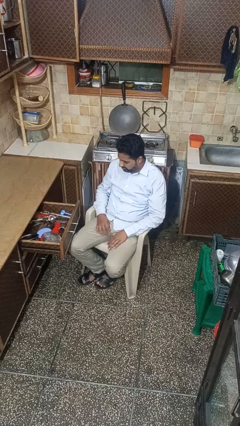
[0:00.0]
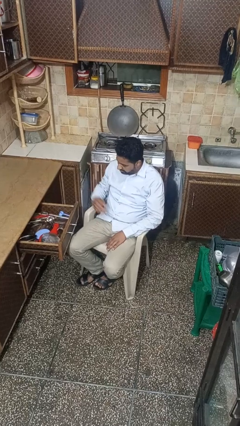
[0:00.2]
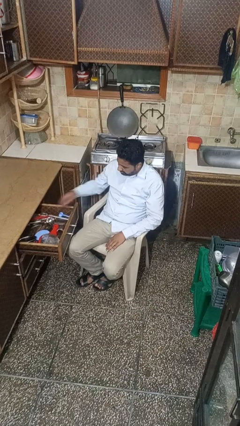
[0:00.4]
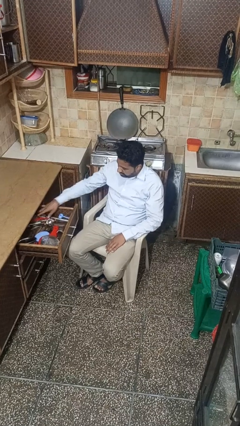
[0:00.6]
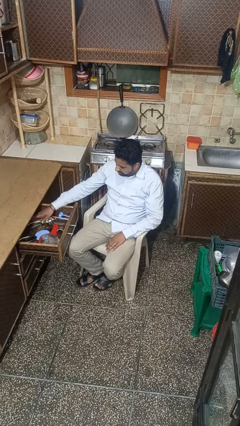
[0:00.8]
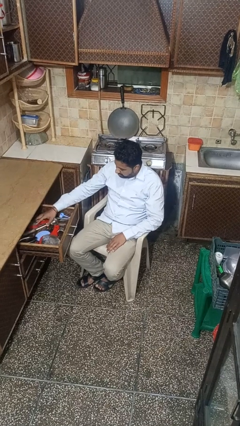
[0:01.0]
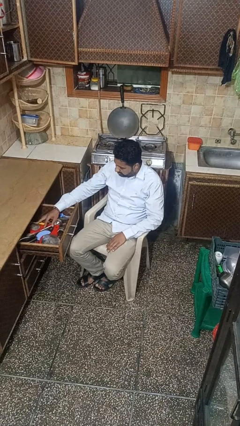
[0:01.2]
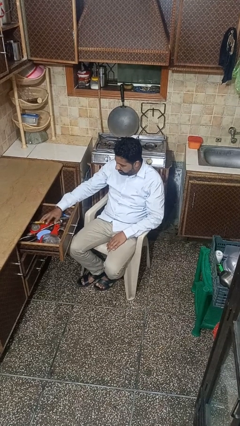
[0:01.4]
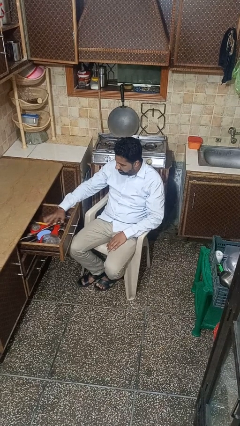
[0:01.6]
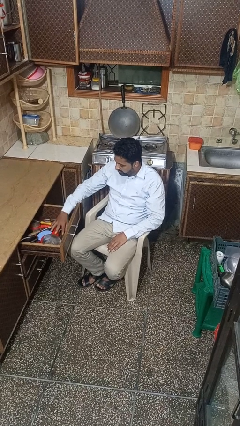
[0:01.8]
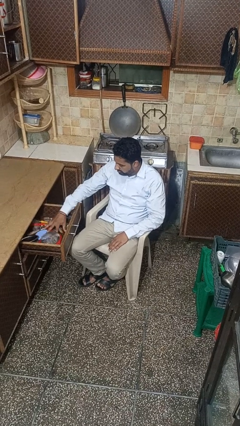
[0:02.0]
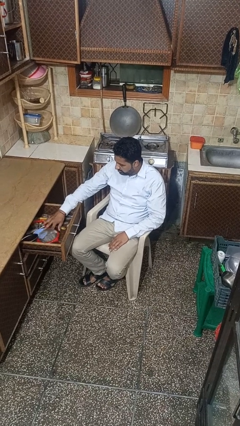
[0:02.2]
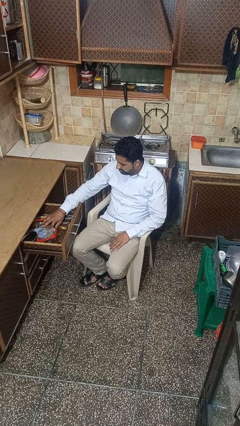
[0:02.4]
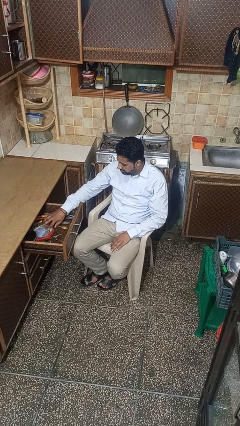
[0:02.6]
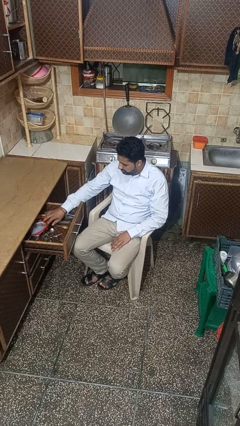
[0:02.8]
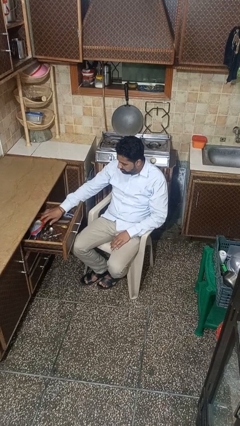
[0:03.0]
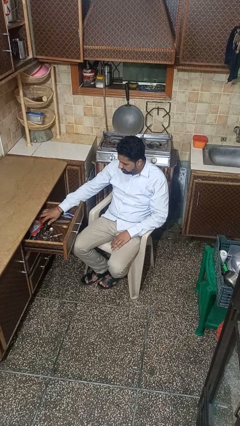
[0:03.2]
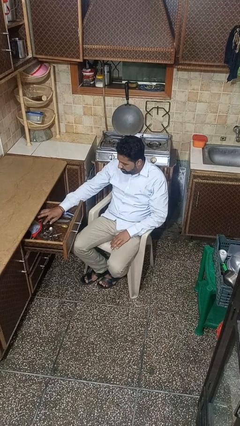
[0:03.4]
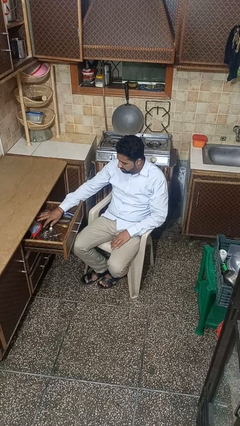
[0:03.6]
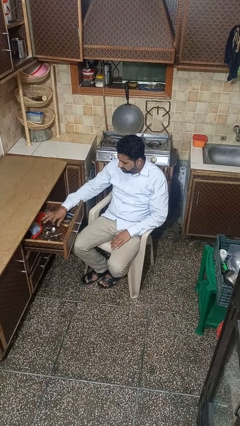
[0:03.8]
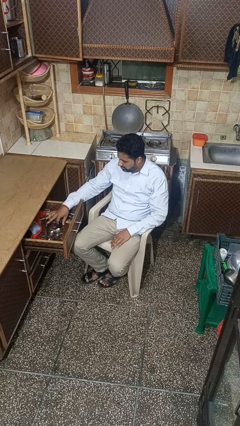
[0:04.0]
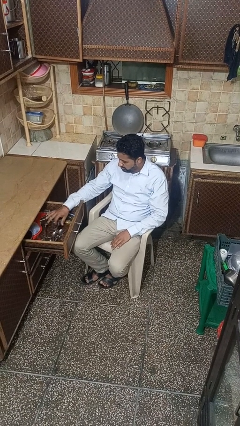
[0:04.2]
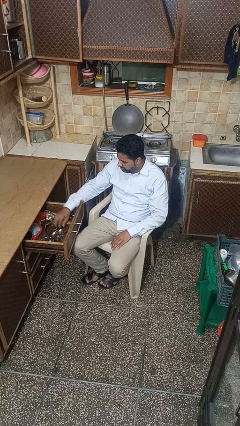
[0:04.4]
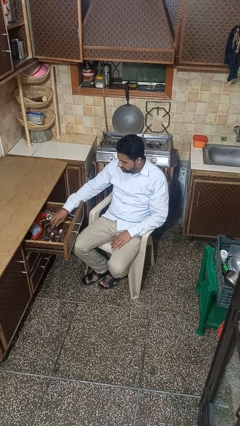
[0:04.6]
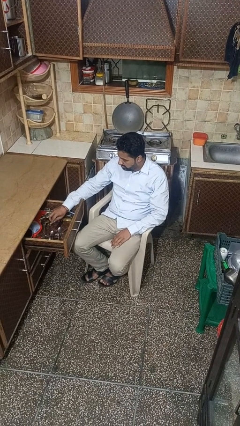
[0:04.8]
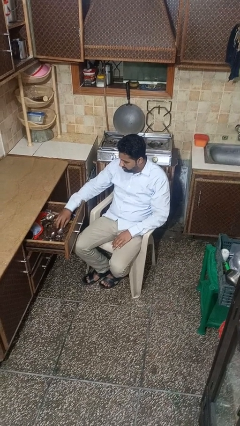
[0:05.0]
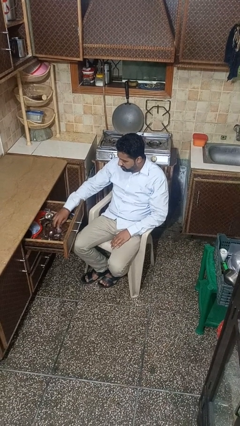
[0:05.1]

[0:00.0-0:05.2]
person searches in kitchen drawer

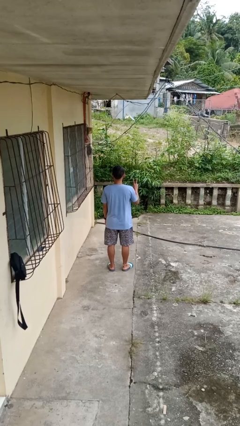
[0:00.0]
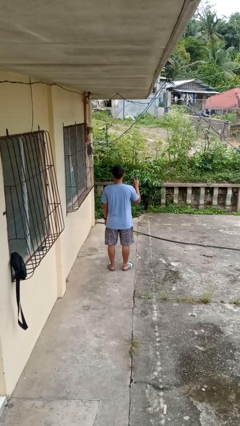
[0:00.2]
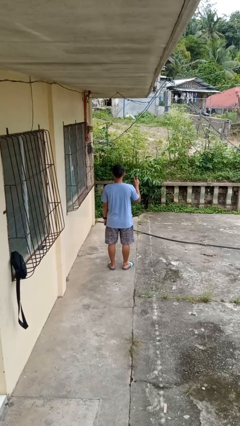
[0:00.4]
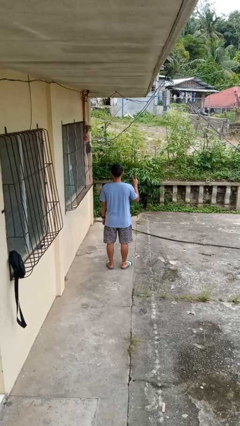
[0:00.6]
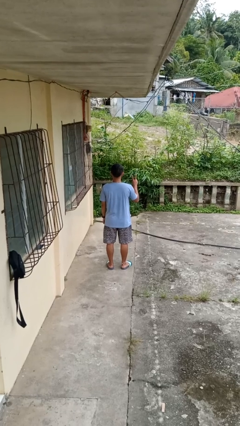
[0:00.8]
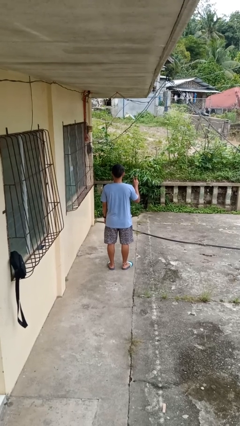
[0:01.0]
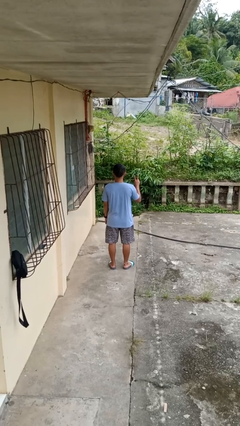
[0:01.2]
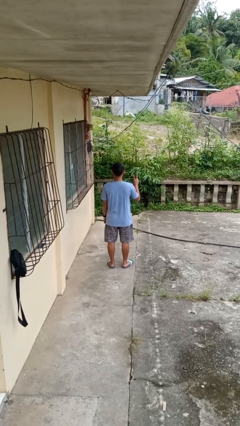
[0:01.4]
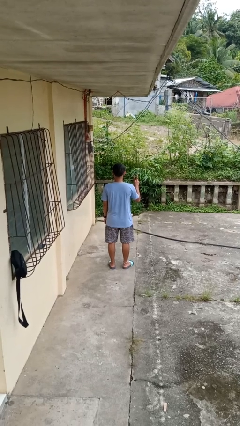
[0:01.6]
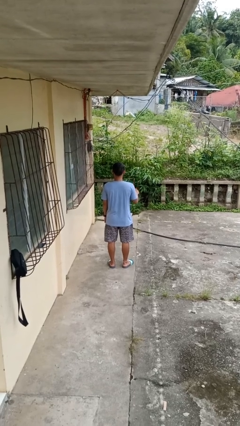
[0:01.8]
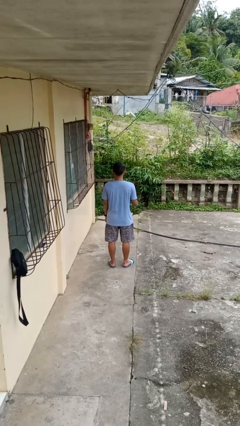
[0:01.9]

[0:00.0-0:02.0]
person gestures peace

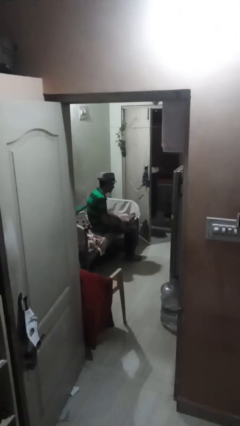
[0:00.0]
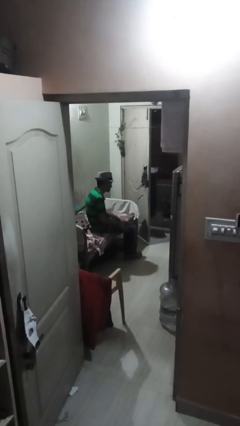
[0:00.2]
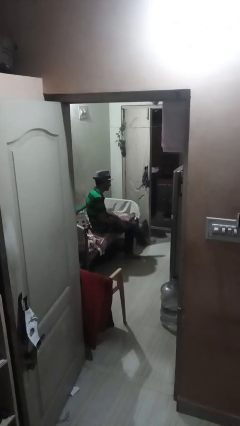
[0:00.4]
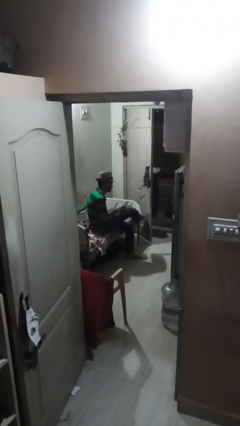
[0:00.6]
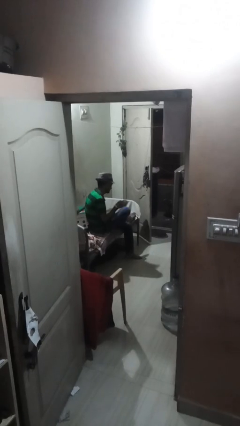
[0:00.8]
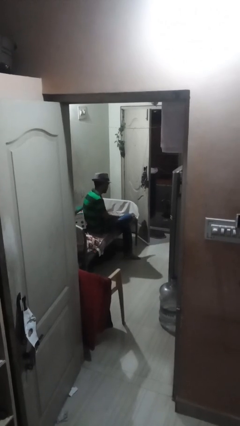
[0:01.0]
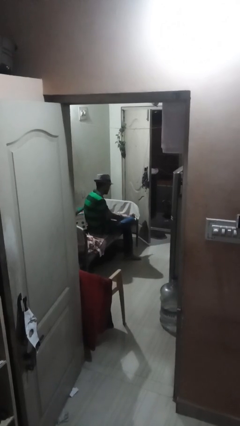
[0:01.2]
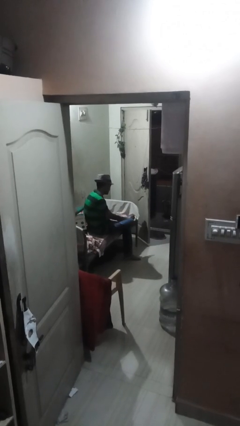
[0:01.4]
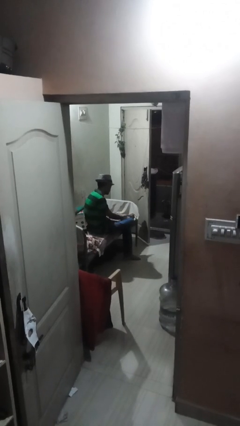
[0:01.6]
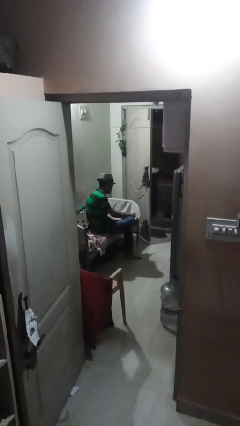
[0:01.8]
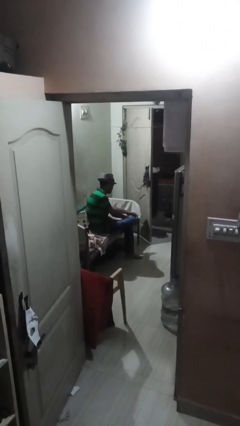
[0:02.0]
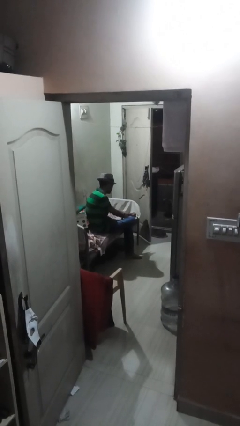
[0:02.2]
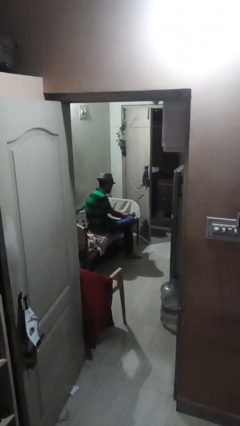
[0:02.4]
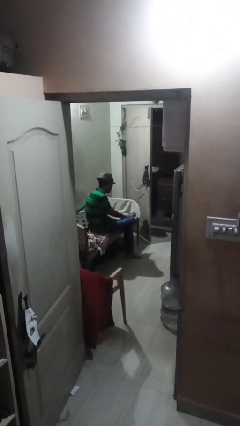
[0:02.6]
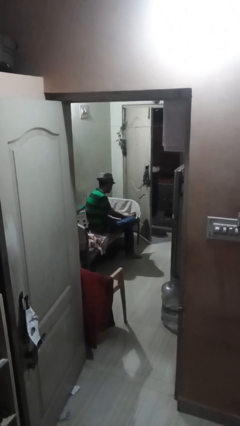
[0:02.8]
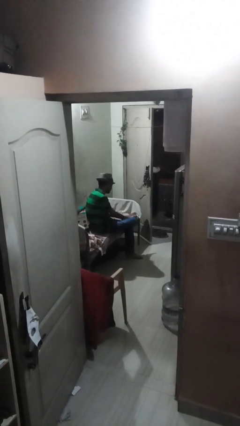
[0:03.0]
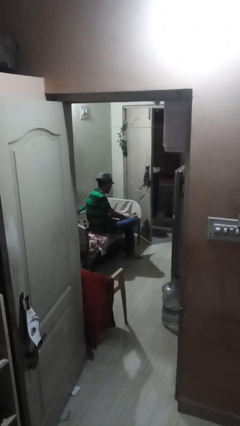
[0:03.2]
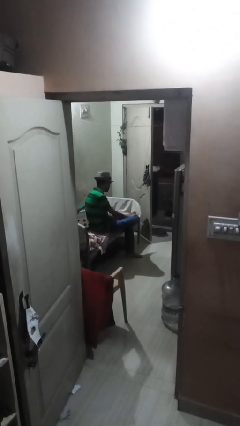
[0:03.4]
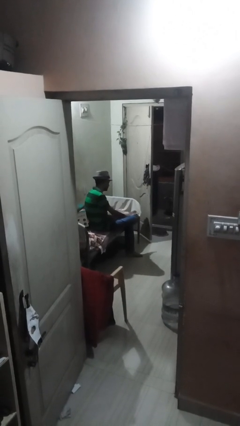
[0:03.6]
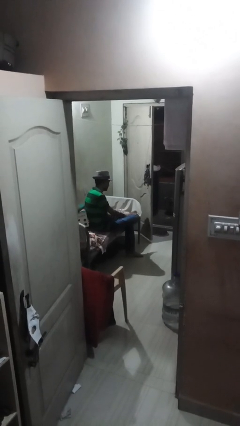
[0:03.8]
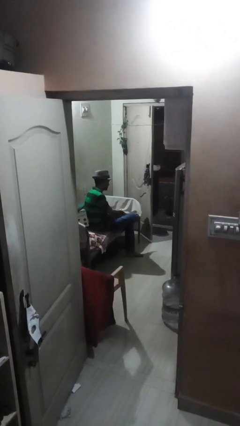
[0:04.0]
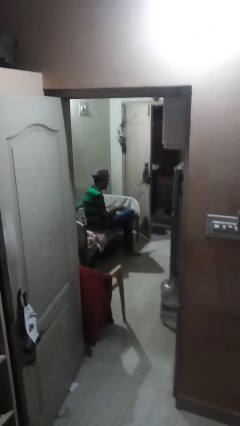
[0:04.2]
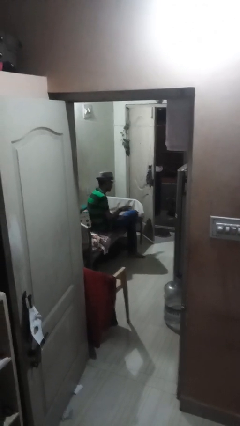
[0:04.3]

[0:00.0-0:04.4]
person rubs foot

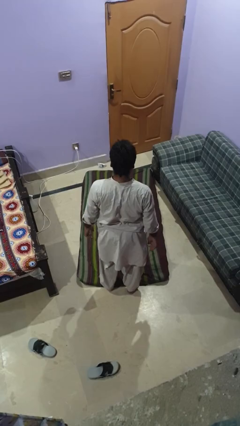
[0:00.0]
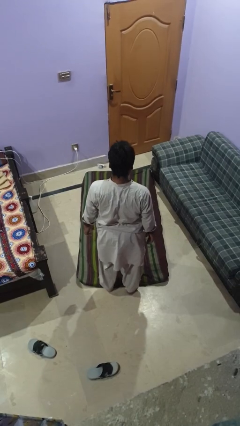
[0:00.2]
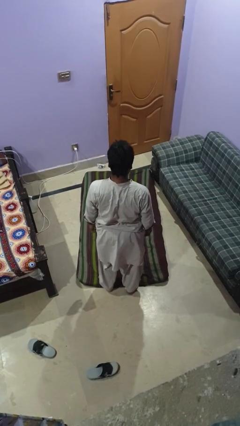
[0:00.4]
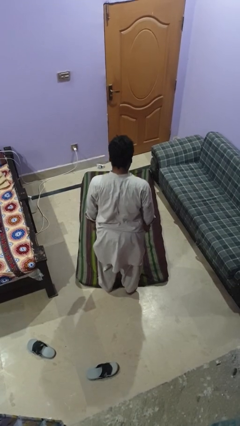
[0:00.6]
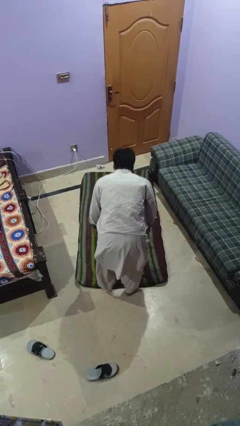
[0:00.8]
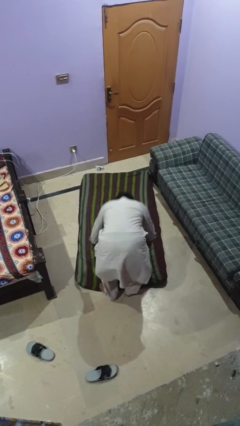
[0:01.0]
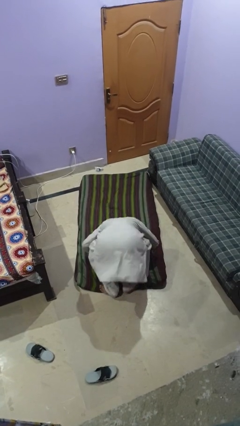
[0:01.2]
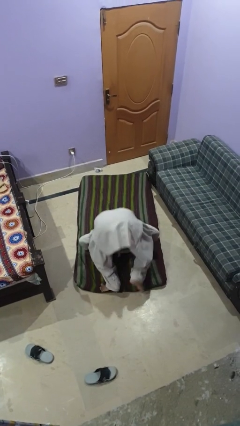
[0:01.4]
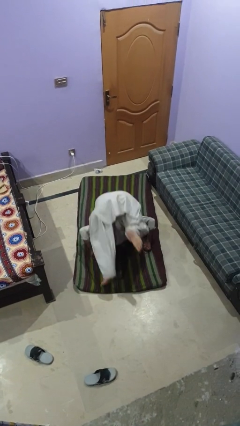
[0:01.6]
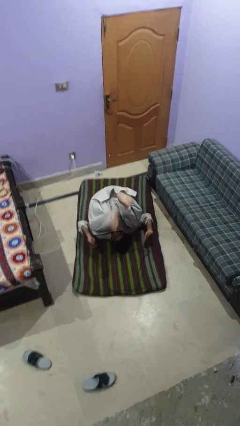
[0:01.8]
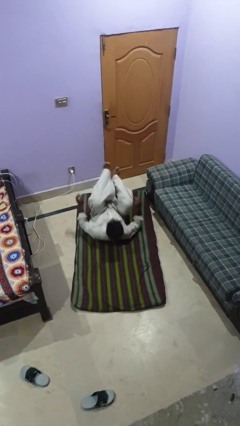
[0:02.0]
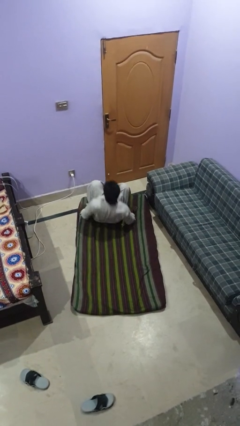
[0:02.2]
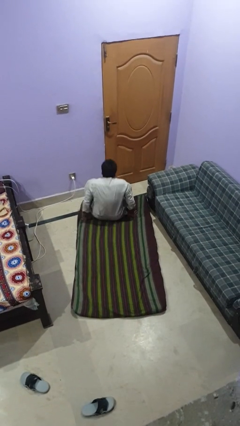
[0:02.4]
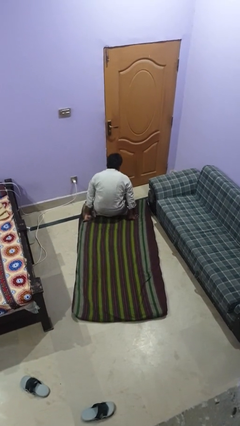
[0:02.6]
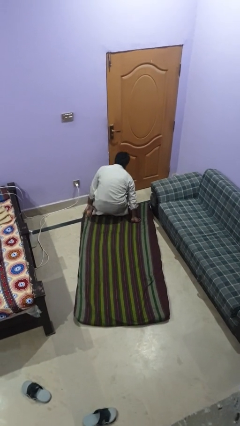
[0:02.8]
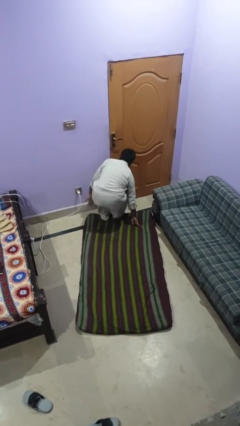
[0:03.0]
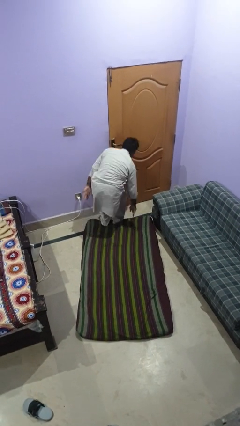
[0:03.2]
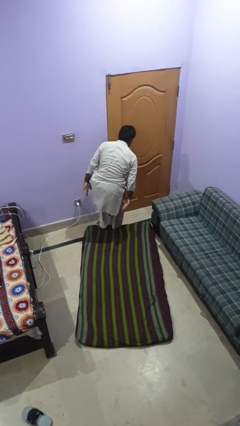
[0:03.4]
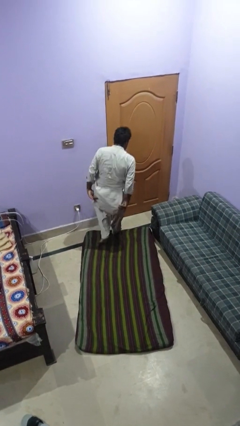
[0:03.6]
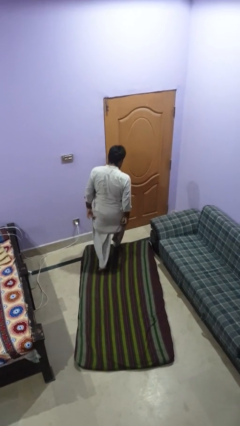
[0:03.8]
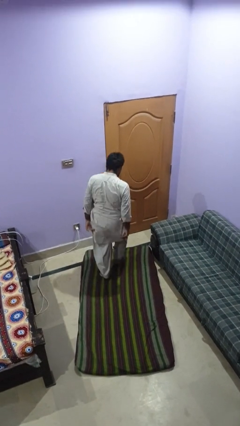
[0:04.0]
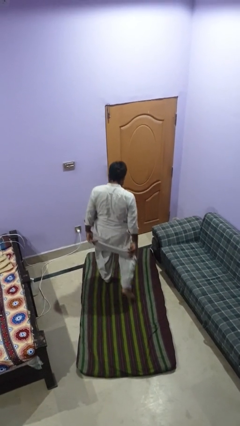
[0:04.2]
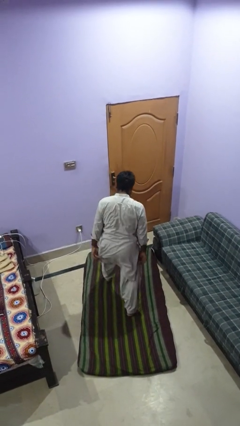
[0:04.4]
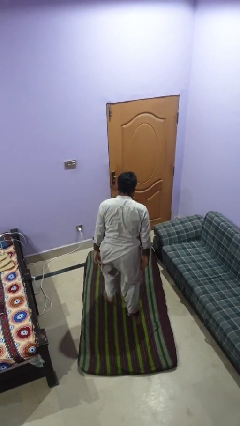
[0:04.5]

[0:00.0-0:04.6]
person somersaults

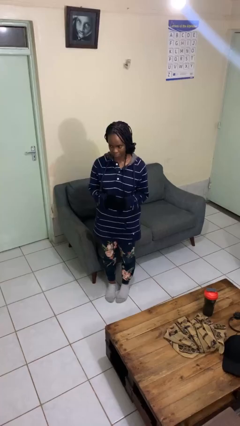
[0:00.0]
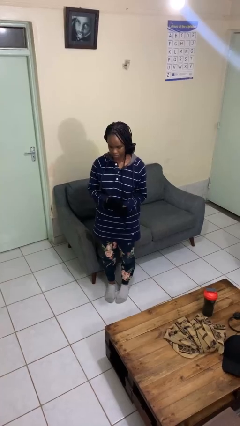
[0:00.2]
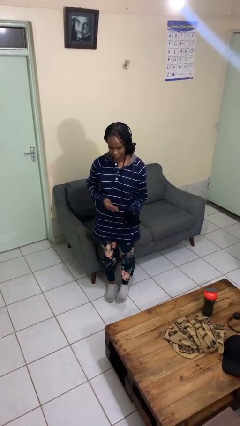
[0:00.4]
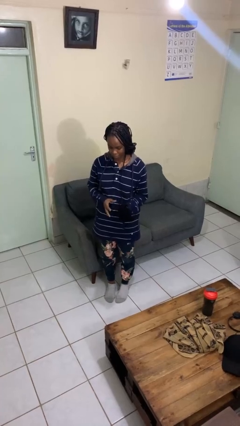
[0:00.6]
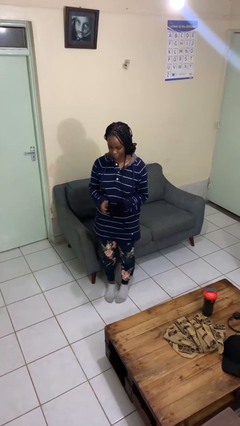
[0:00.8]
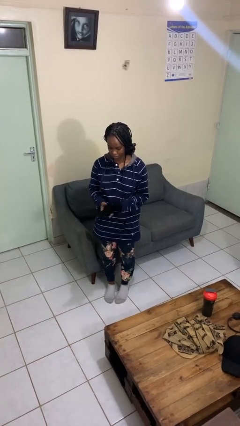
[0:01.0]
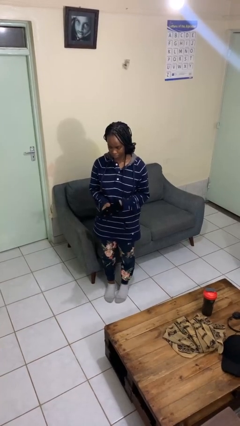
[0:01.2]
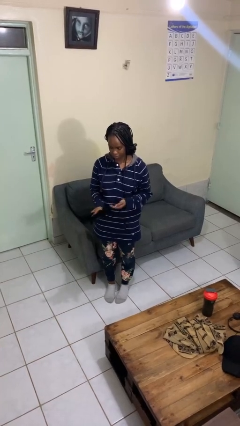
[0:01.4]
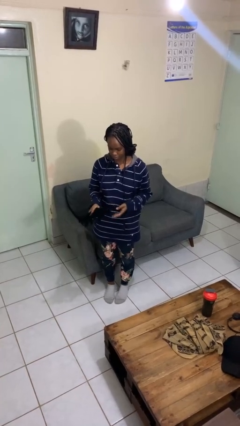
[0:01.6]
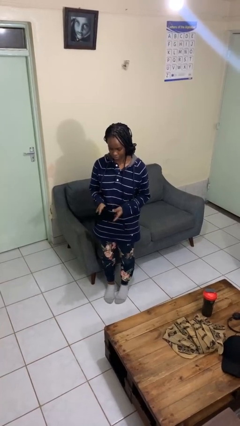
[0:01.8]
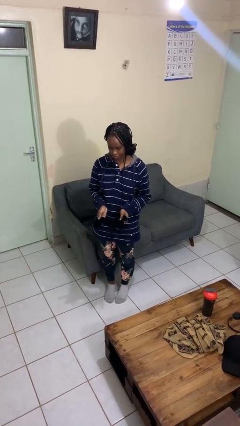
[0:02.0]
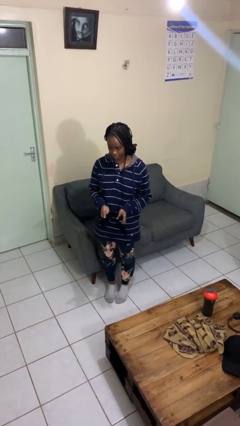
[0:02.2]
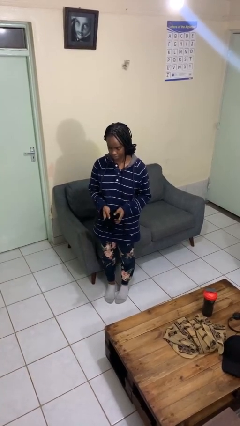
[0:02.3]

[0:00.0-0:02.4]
person takes off gloves
